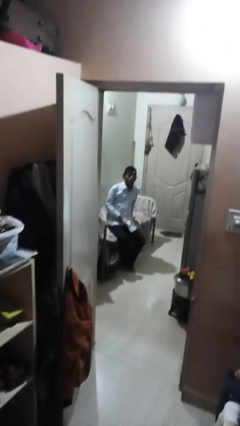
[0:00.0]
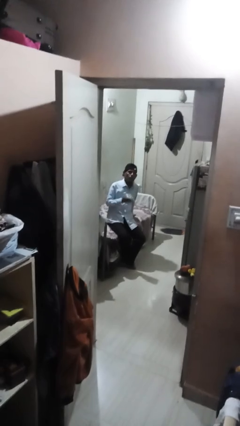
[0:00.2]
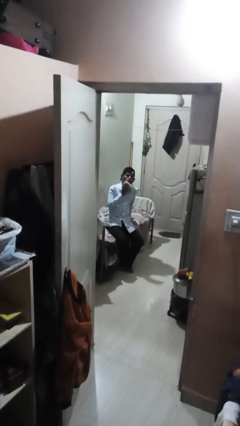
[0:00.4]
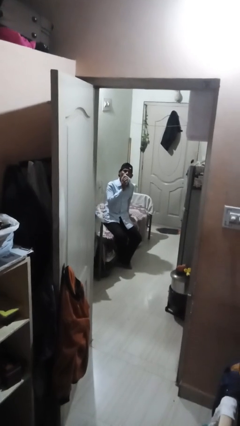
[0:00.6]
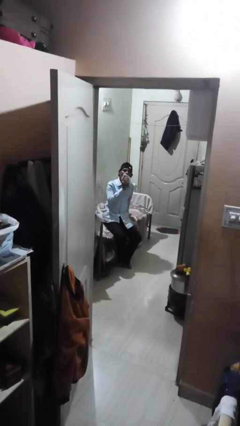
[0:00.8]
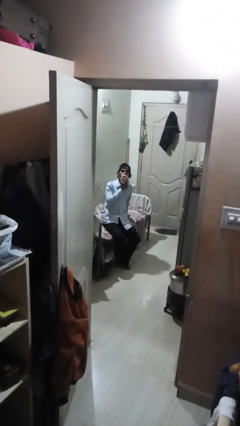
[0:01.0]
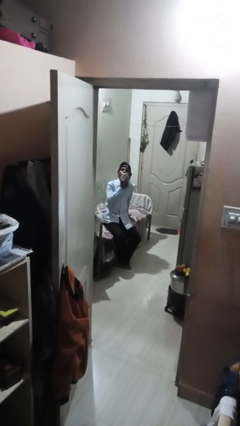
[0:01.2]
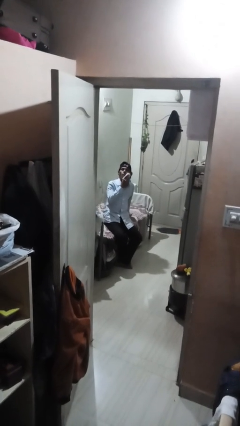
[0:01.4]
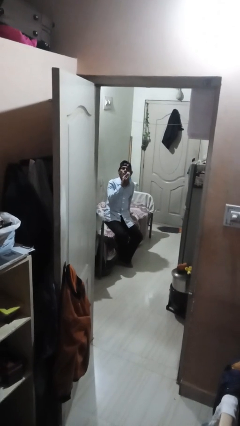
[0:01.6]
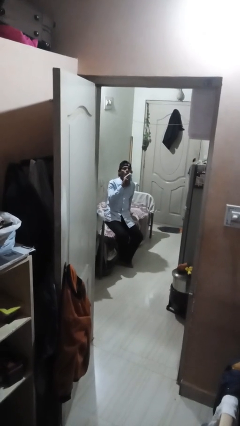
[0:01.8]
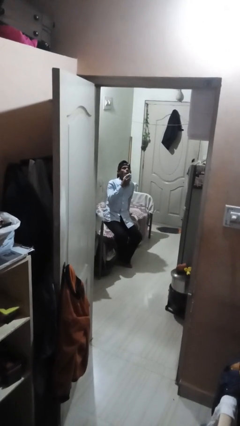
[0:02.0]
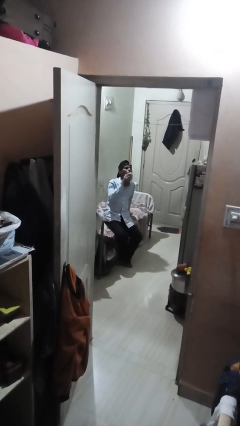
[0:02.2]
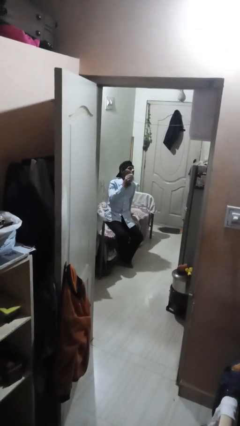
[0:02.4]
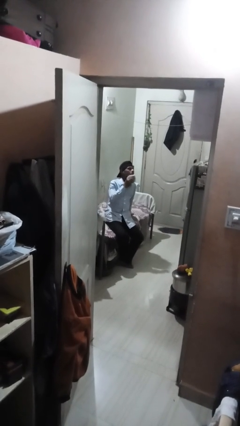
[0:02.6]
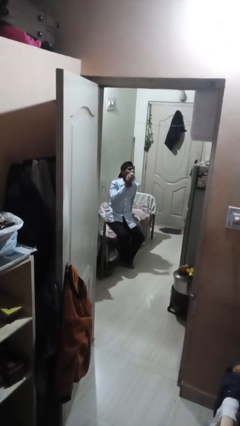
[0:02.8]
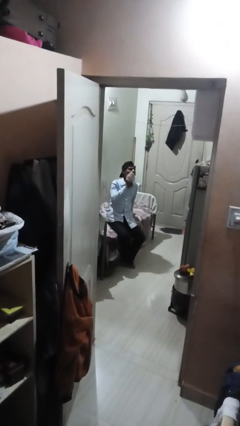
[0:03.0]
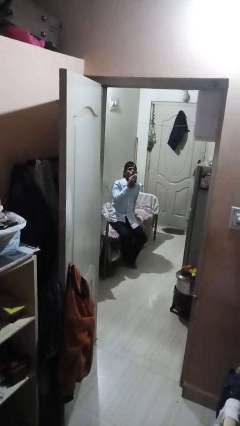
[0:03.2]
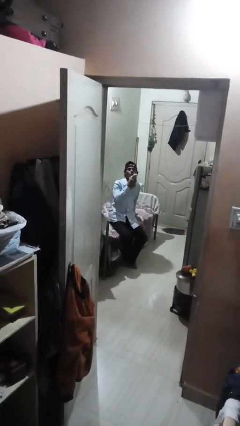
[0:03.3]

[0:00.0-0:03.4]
person wipes mouth with napkin

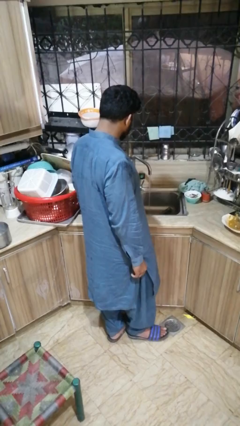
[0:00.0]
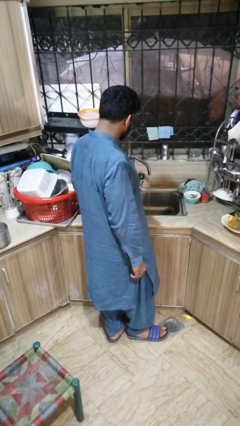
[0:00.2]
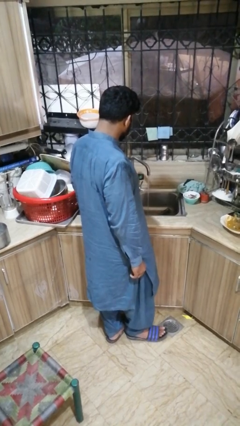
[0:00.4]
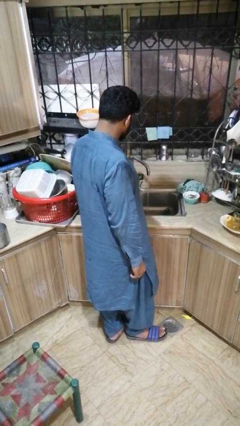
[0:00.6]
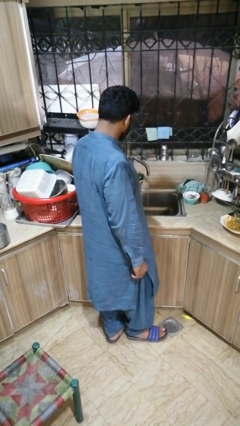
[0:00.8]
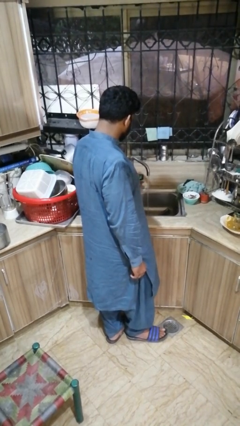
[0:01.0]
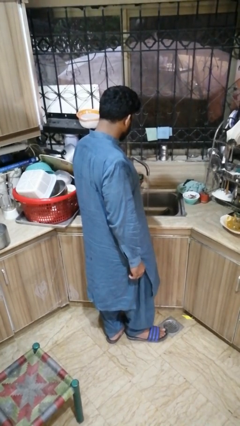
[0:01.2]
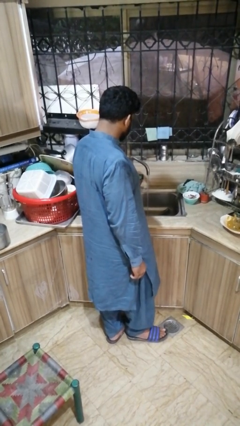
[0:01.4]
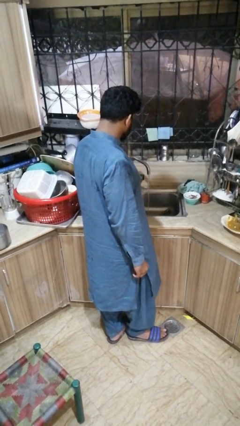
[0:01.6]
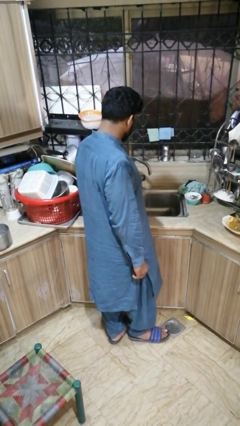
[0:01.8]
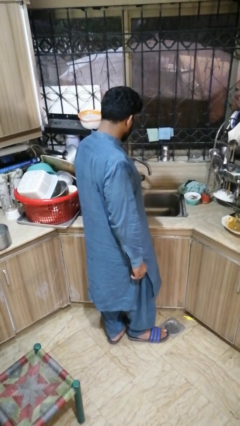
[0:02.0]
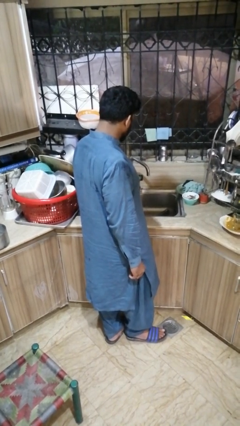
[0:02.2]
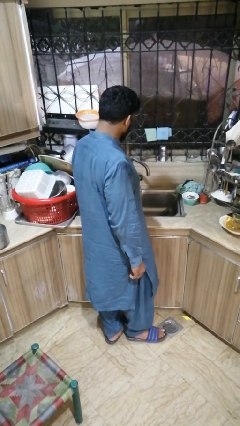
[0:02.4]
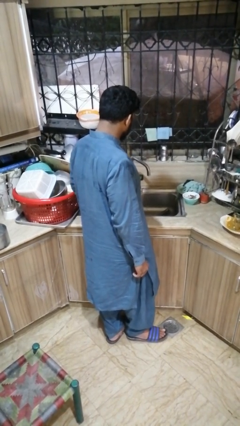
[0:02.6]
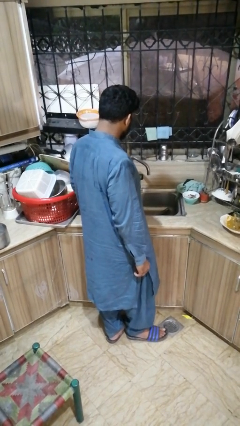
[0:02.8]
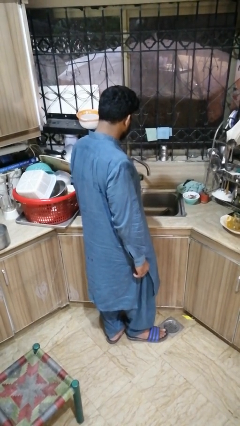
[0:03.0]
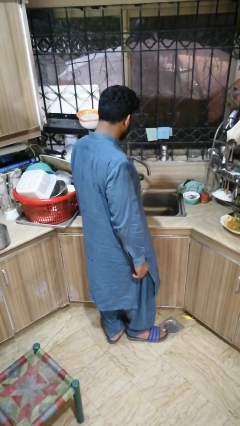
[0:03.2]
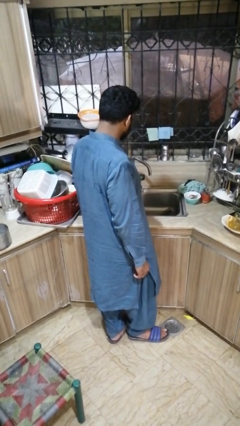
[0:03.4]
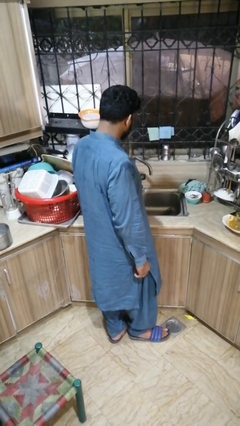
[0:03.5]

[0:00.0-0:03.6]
person turns off faucet

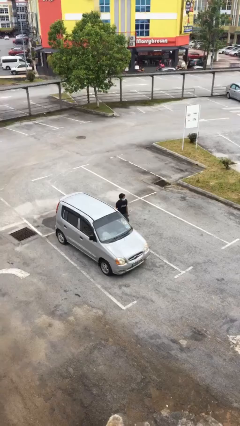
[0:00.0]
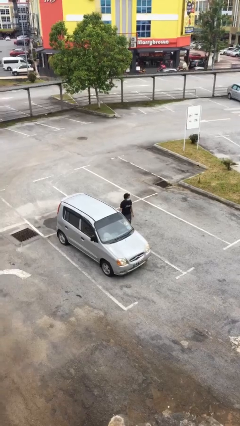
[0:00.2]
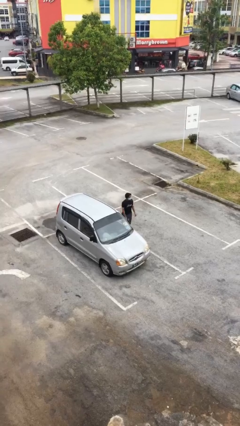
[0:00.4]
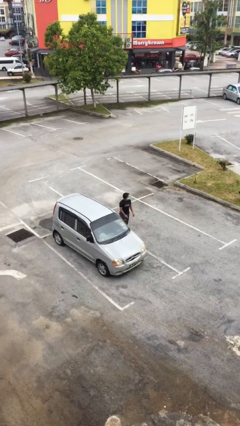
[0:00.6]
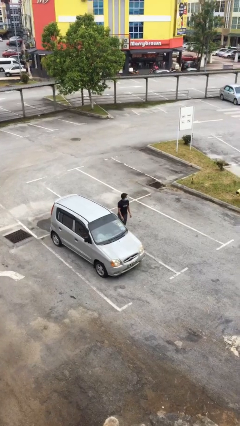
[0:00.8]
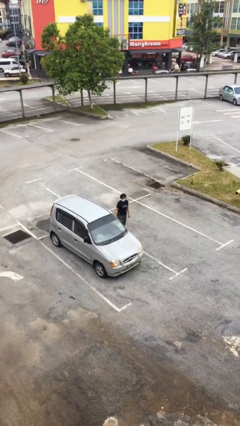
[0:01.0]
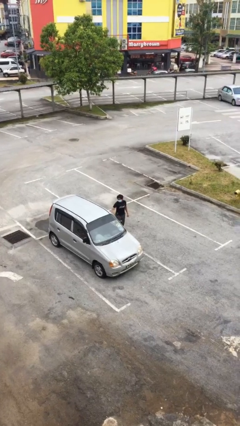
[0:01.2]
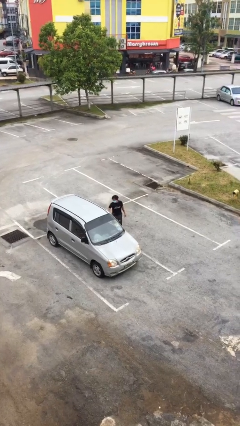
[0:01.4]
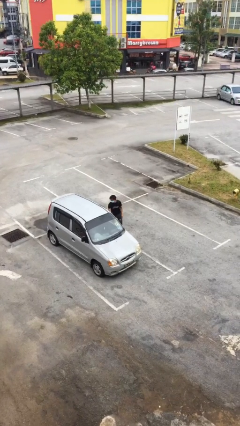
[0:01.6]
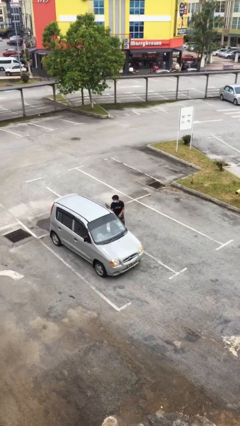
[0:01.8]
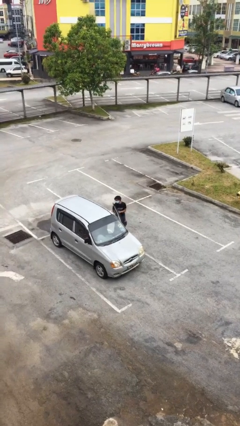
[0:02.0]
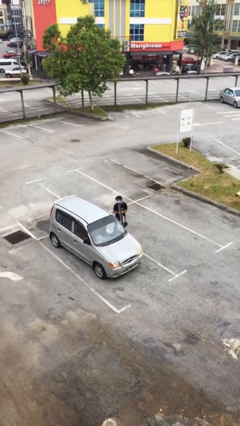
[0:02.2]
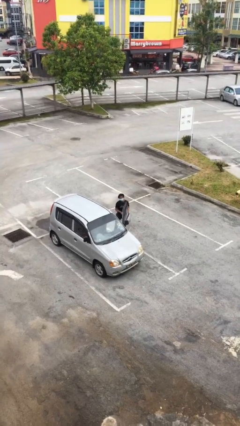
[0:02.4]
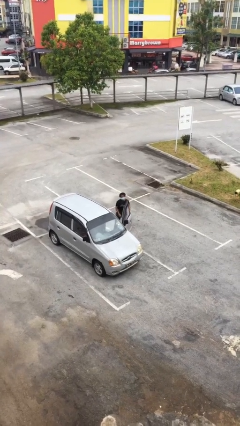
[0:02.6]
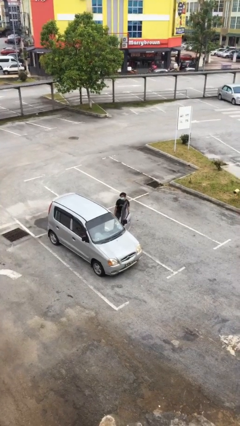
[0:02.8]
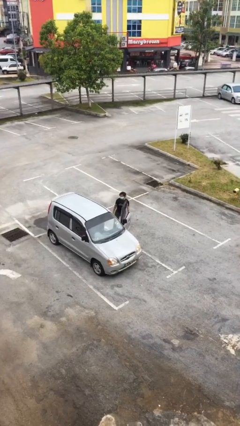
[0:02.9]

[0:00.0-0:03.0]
person opens car door

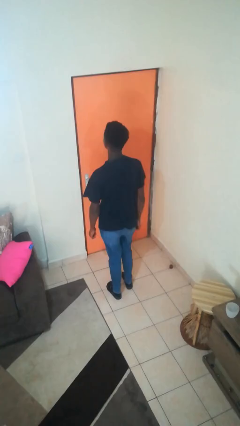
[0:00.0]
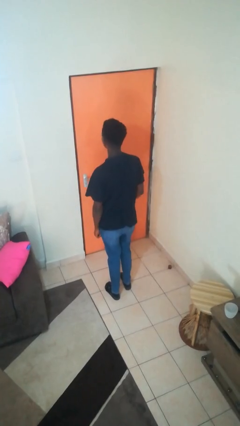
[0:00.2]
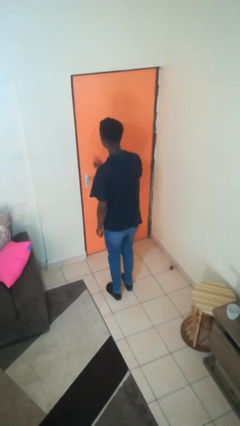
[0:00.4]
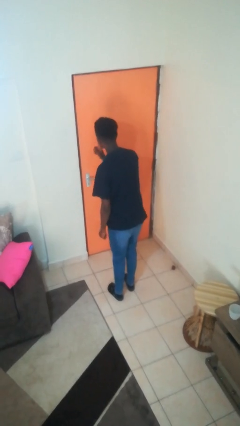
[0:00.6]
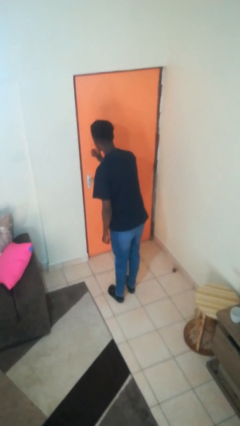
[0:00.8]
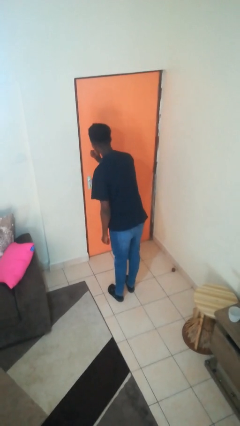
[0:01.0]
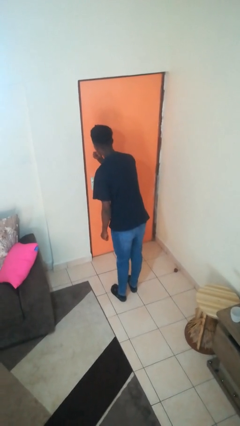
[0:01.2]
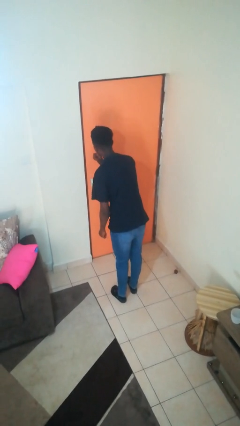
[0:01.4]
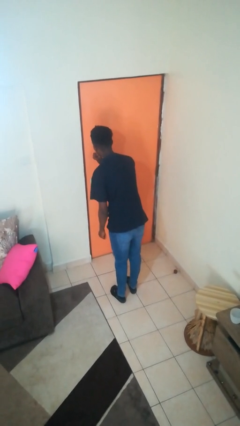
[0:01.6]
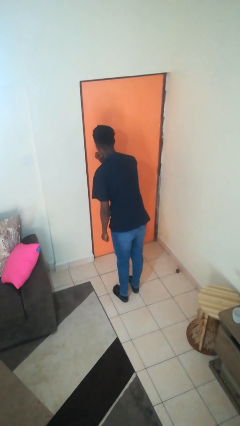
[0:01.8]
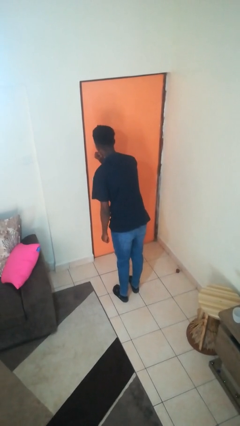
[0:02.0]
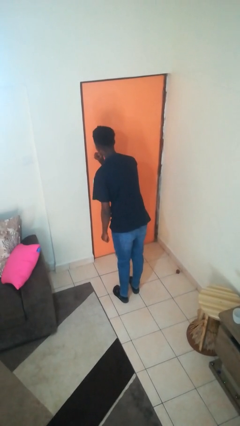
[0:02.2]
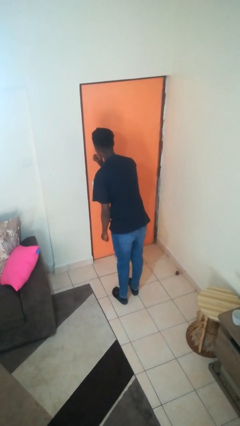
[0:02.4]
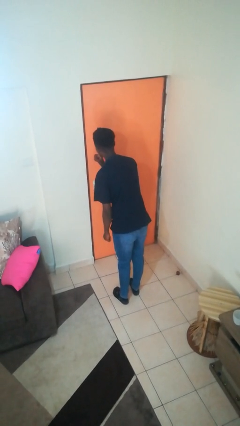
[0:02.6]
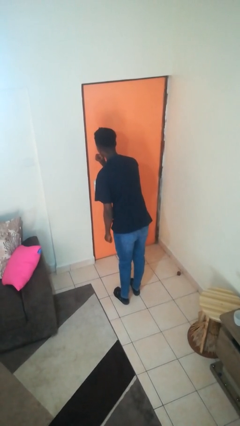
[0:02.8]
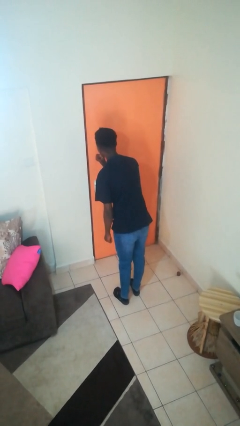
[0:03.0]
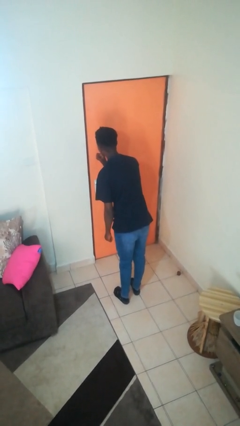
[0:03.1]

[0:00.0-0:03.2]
person gestures be quiet

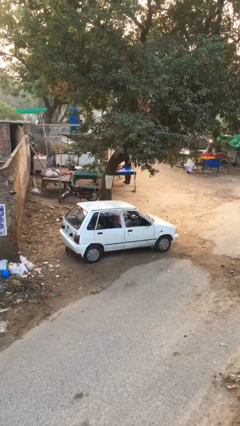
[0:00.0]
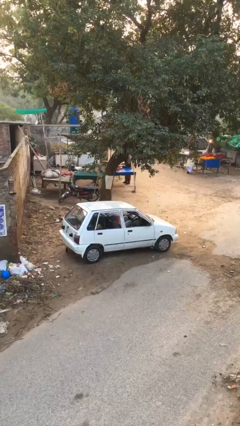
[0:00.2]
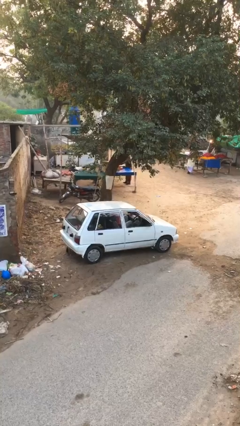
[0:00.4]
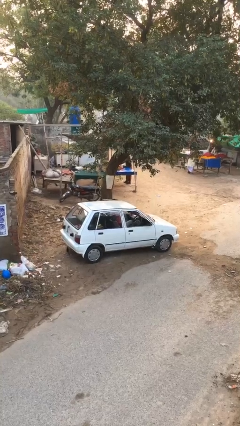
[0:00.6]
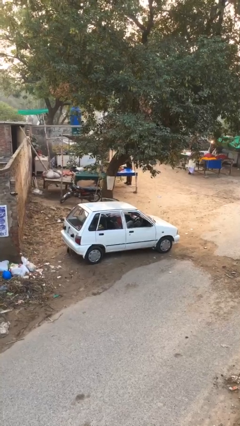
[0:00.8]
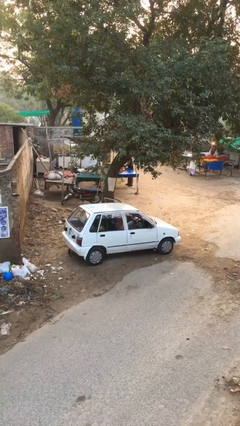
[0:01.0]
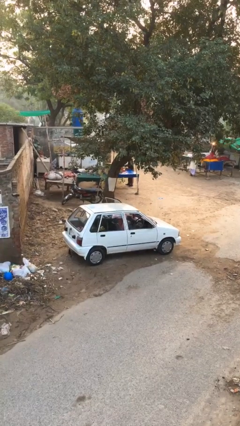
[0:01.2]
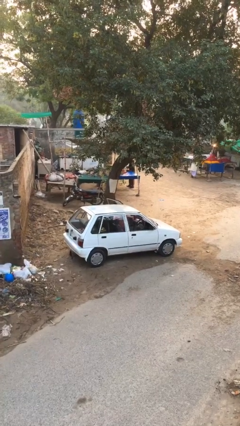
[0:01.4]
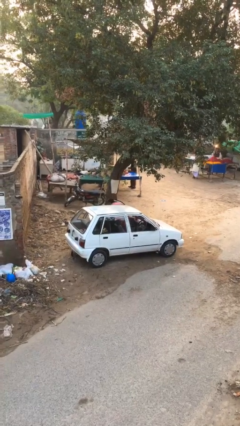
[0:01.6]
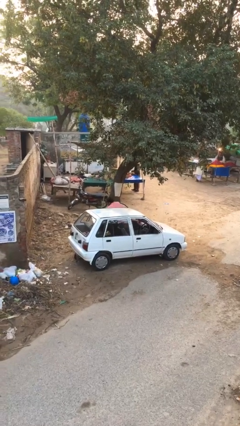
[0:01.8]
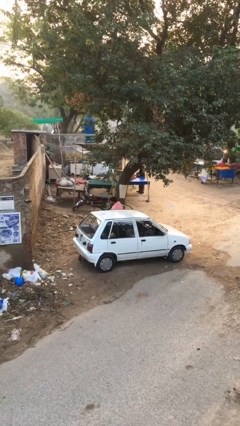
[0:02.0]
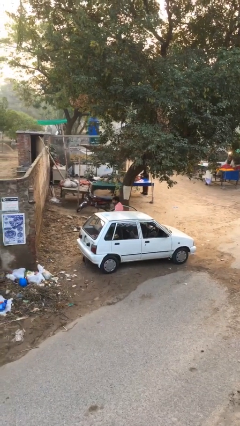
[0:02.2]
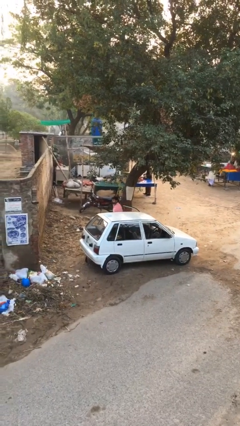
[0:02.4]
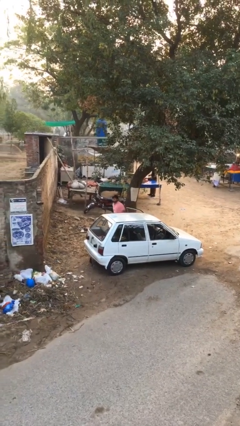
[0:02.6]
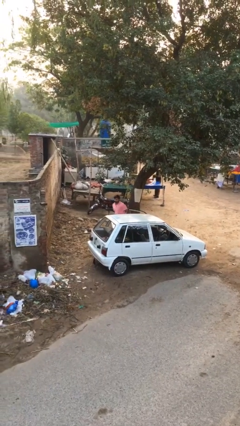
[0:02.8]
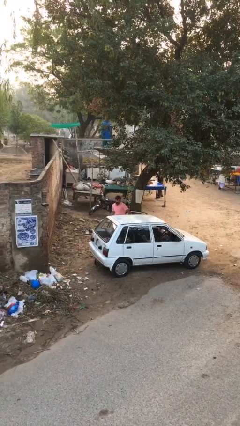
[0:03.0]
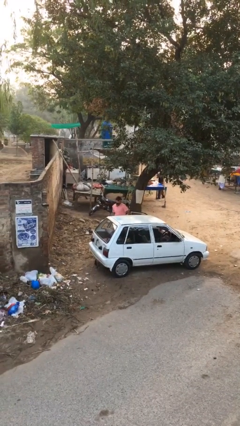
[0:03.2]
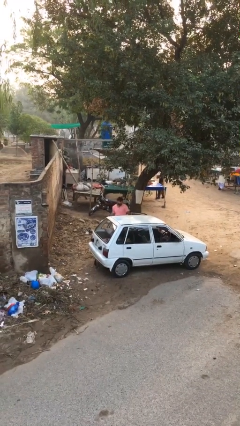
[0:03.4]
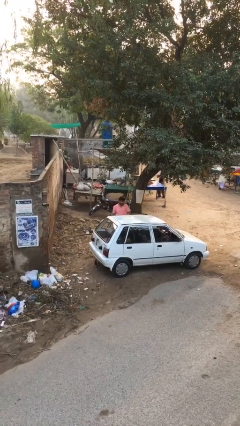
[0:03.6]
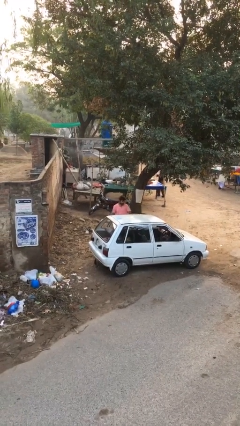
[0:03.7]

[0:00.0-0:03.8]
person exits car

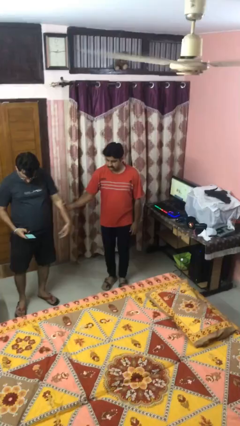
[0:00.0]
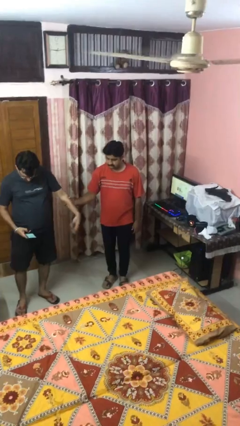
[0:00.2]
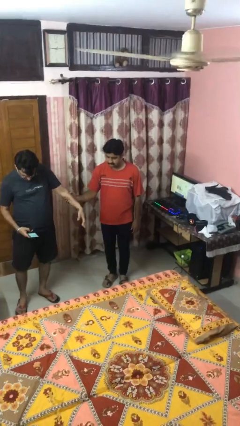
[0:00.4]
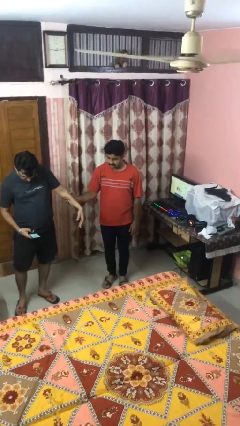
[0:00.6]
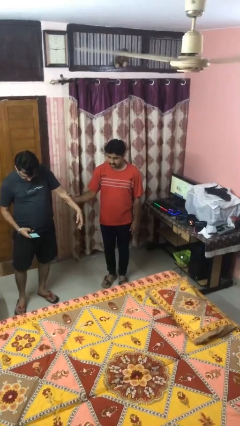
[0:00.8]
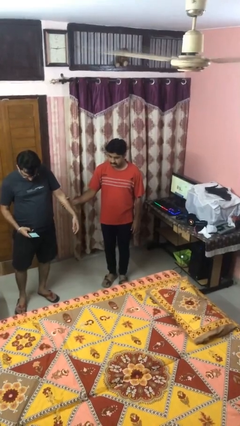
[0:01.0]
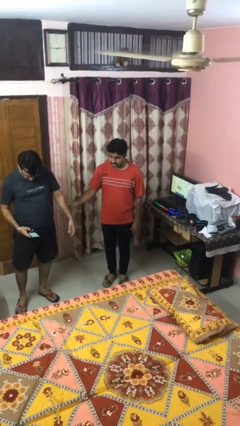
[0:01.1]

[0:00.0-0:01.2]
person grabs person by forearm
